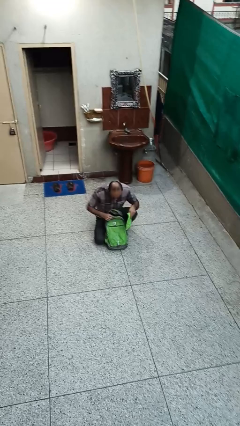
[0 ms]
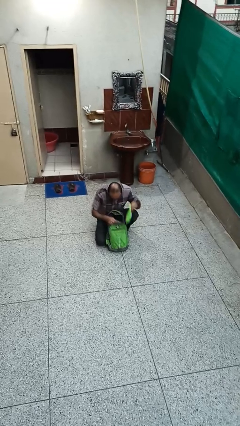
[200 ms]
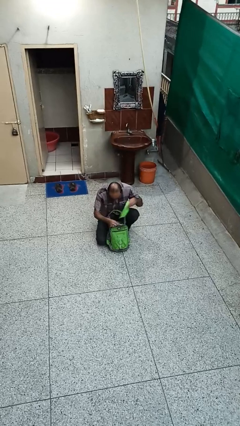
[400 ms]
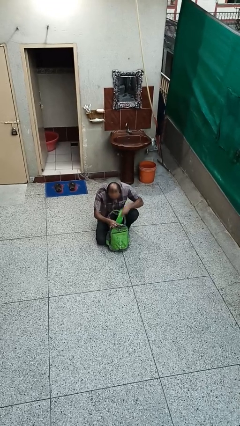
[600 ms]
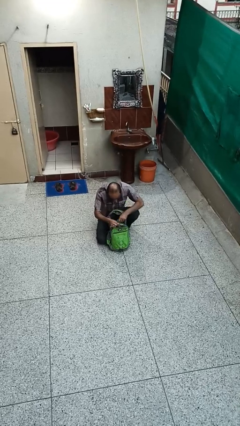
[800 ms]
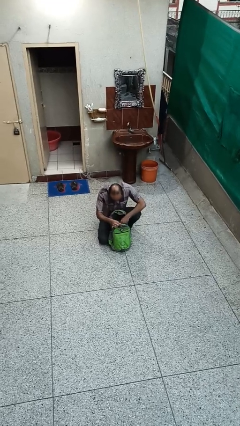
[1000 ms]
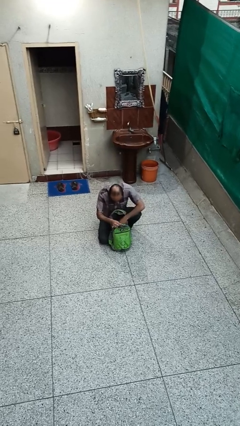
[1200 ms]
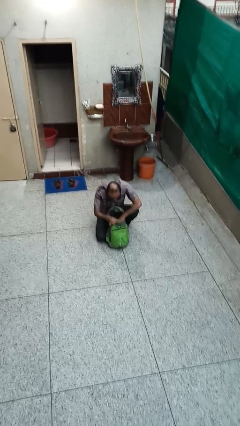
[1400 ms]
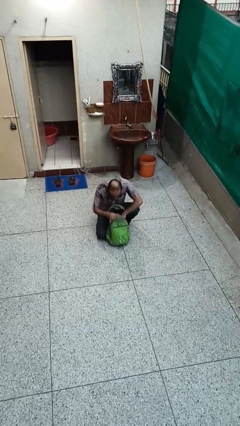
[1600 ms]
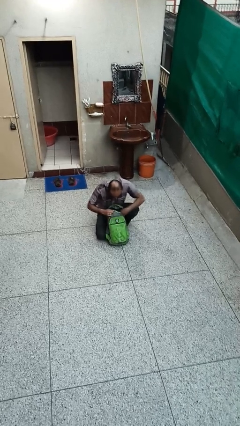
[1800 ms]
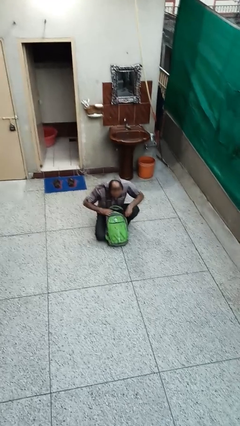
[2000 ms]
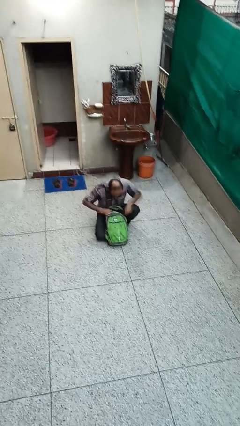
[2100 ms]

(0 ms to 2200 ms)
person puts object into backpack

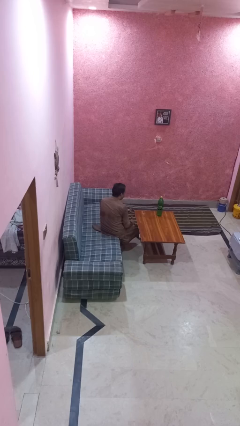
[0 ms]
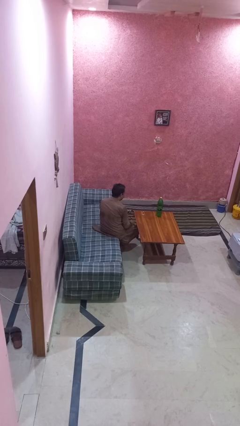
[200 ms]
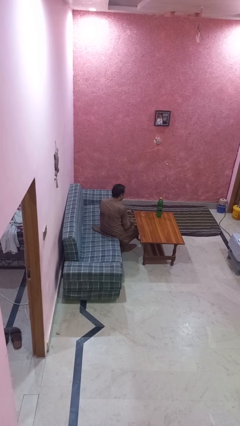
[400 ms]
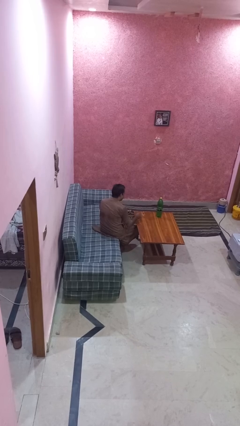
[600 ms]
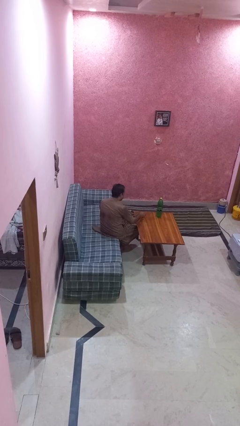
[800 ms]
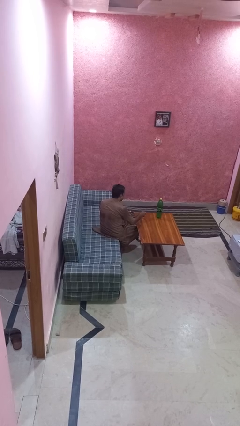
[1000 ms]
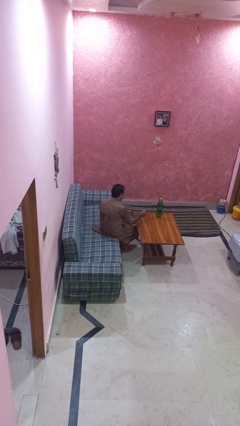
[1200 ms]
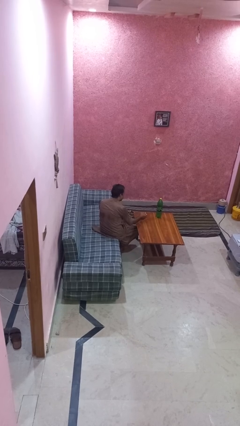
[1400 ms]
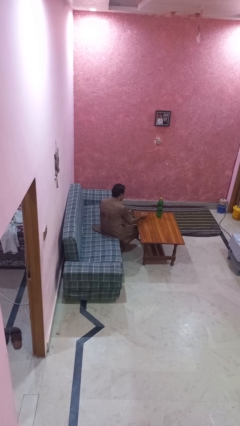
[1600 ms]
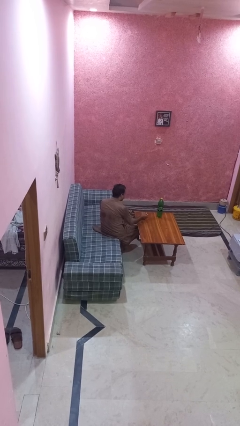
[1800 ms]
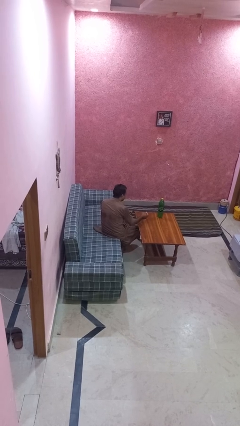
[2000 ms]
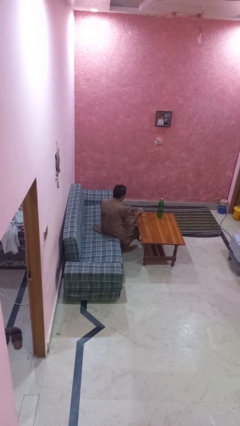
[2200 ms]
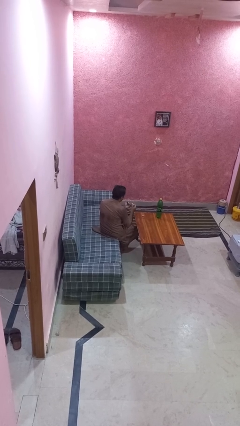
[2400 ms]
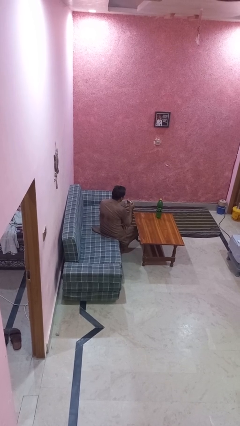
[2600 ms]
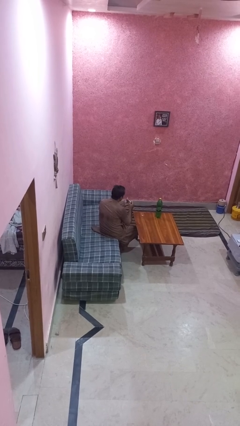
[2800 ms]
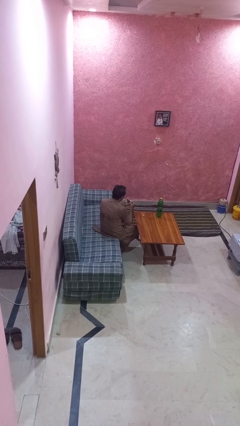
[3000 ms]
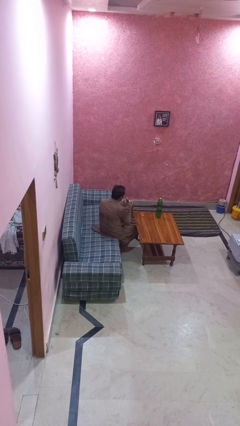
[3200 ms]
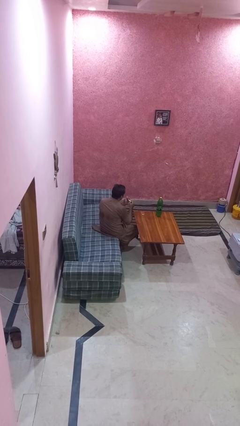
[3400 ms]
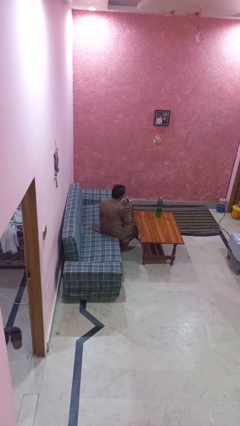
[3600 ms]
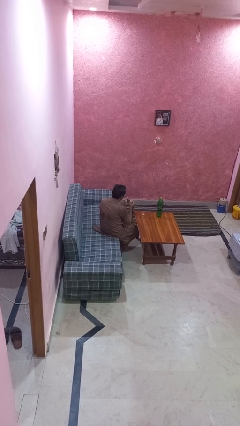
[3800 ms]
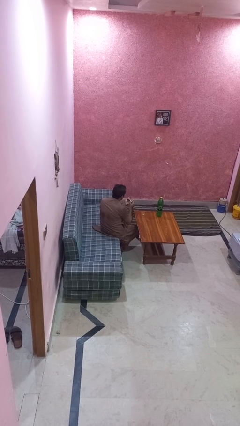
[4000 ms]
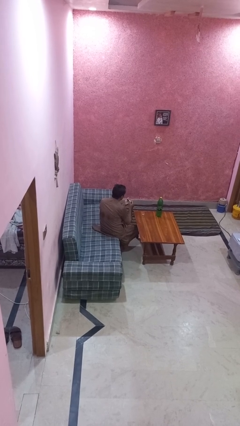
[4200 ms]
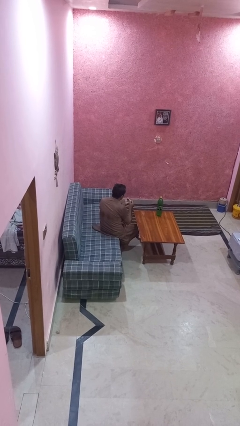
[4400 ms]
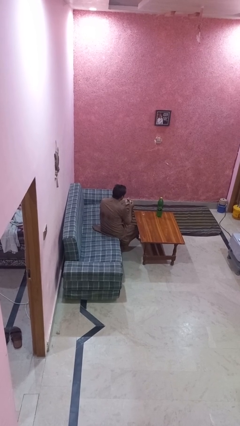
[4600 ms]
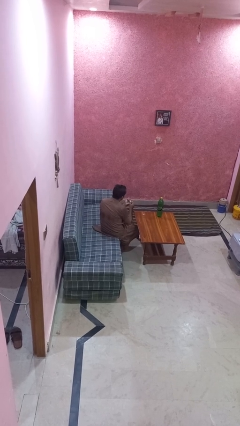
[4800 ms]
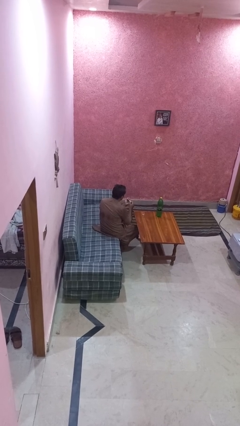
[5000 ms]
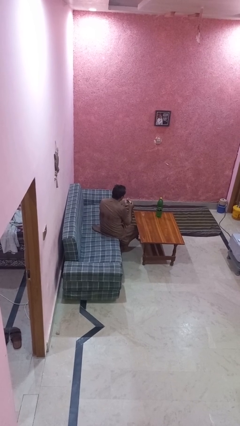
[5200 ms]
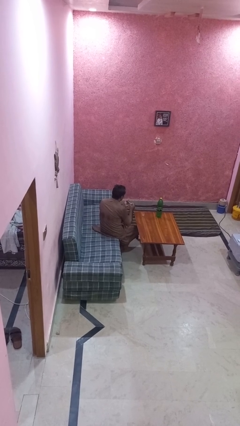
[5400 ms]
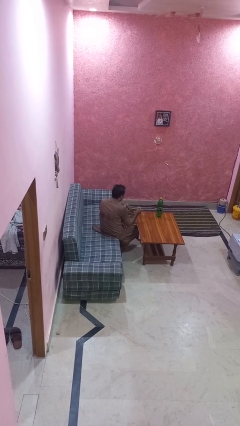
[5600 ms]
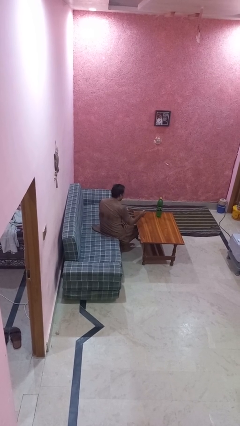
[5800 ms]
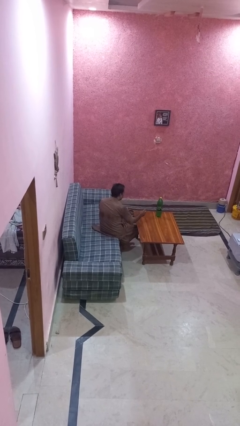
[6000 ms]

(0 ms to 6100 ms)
person paints fingernails

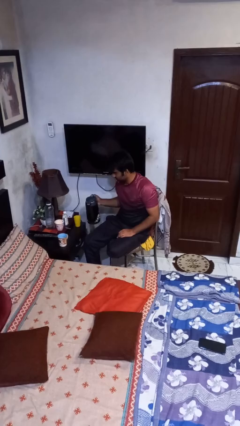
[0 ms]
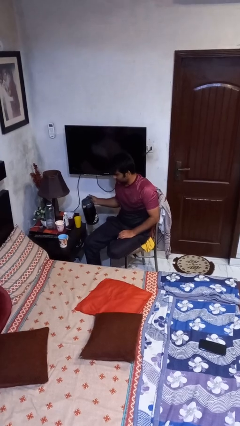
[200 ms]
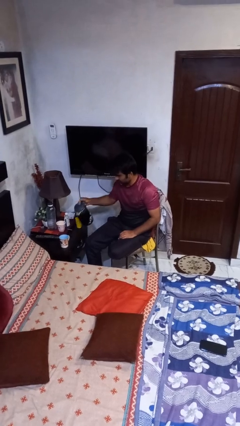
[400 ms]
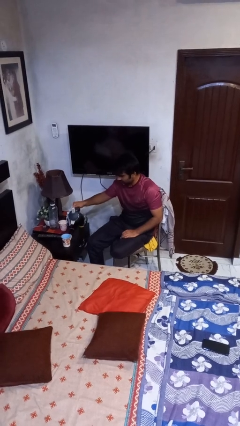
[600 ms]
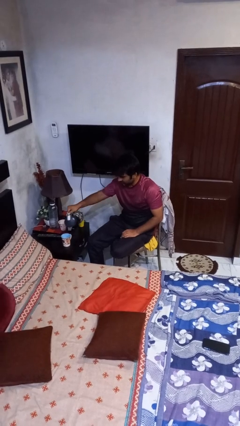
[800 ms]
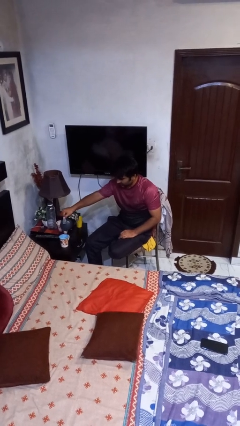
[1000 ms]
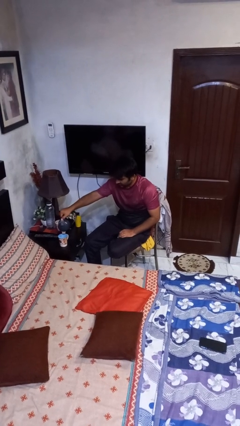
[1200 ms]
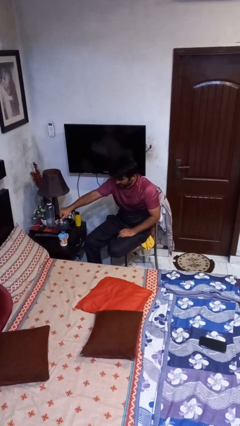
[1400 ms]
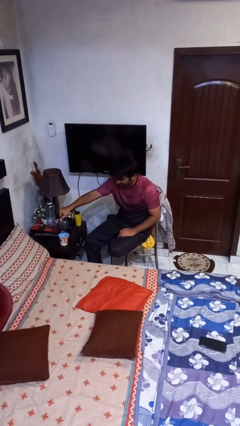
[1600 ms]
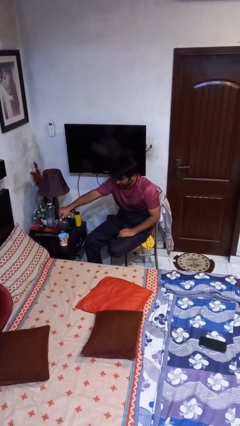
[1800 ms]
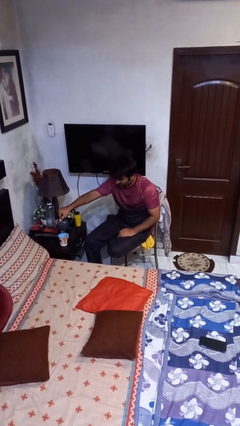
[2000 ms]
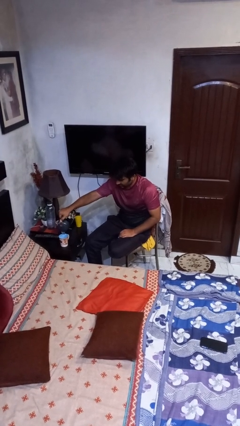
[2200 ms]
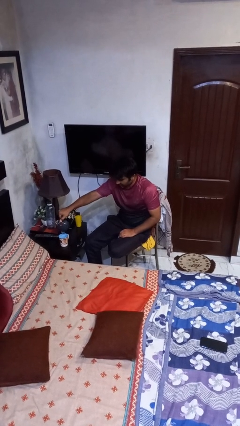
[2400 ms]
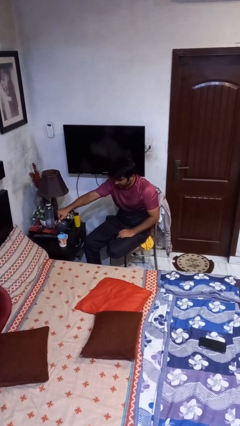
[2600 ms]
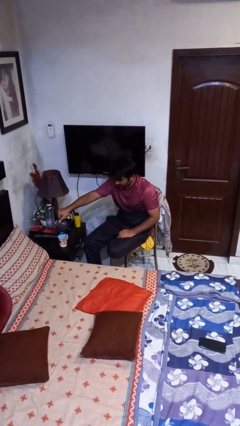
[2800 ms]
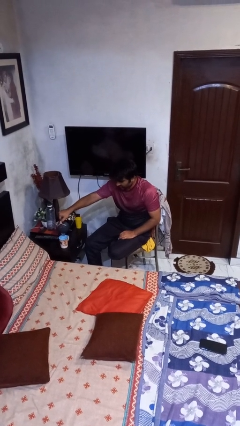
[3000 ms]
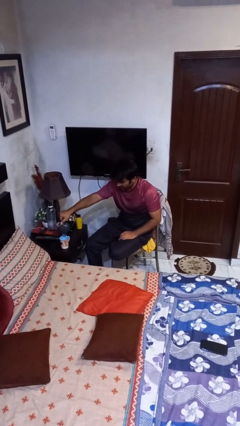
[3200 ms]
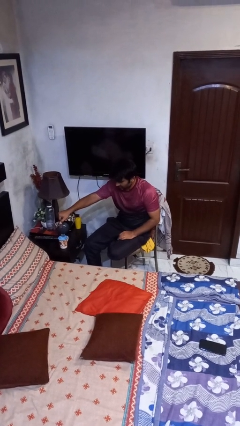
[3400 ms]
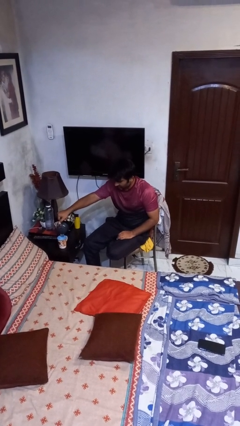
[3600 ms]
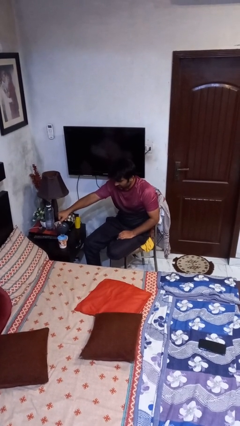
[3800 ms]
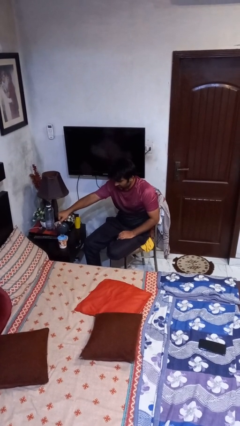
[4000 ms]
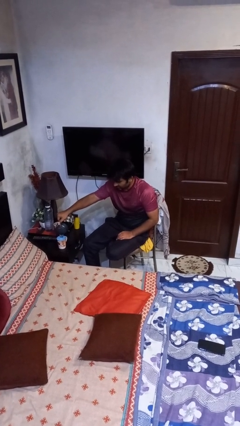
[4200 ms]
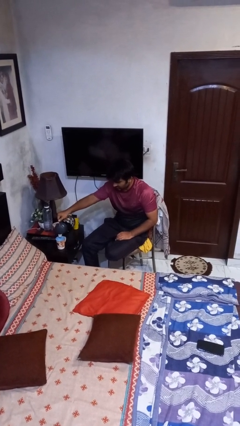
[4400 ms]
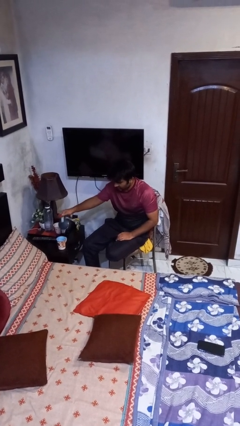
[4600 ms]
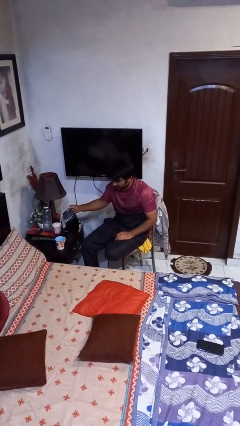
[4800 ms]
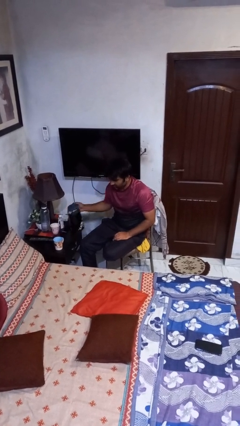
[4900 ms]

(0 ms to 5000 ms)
person pours coffee into mug

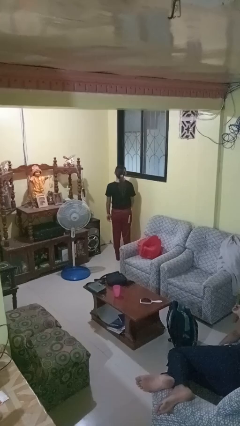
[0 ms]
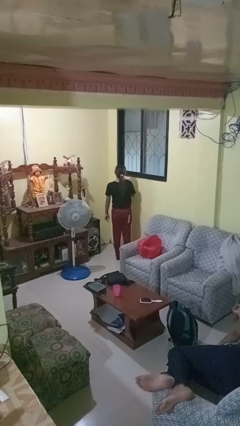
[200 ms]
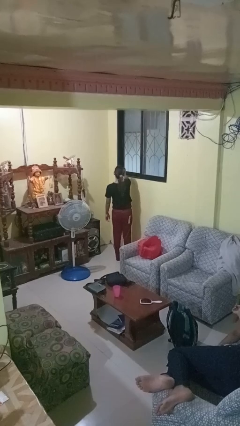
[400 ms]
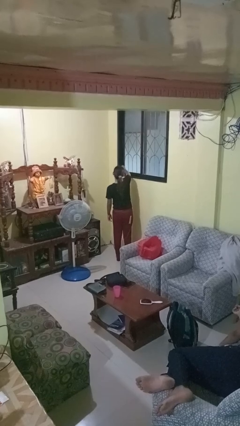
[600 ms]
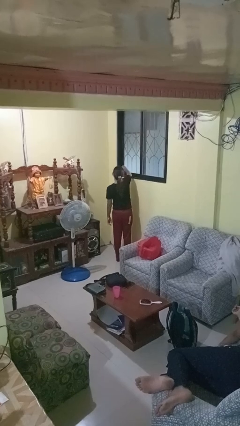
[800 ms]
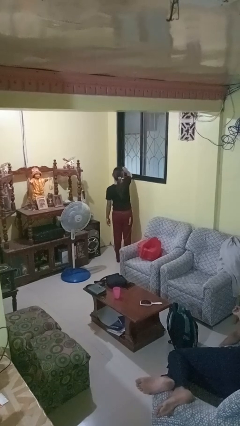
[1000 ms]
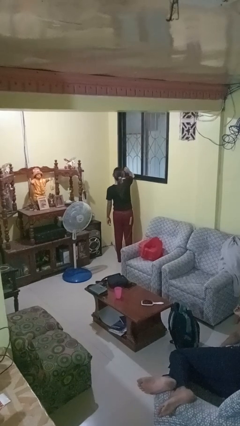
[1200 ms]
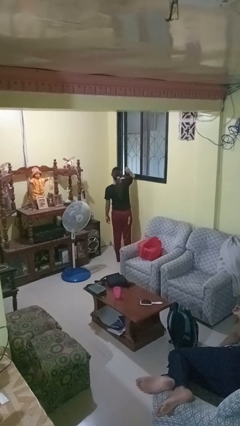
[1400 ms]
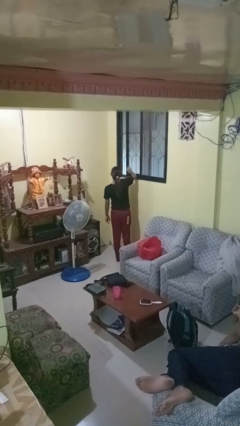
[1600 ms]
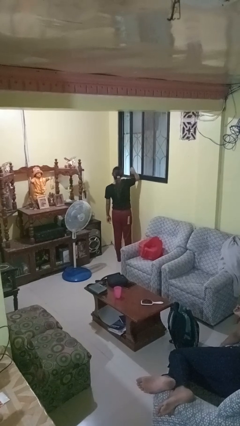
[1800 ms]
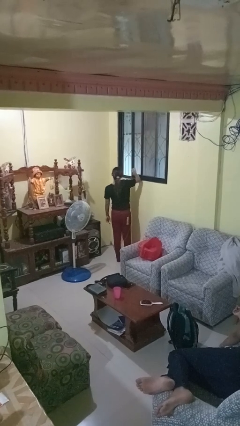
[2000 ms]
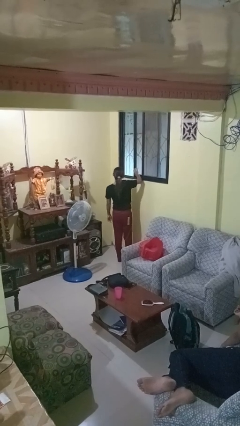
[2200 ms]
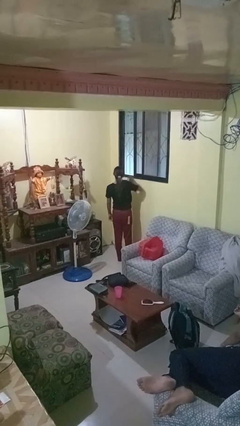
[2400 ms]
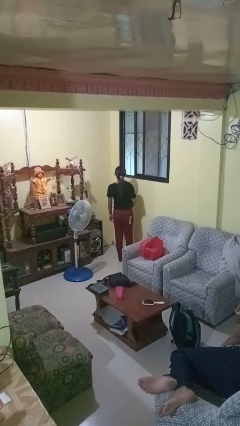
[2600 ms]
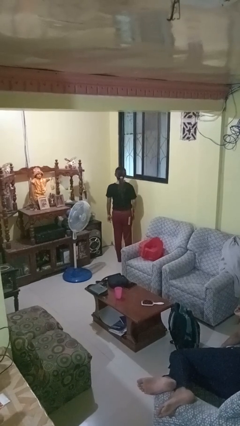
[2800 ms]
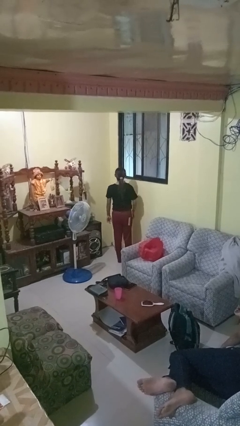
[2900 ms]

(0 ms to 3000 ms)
person opens home window

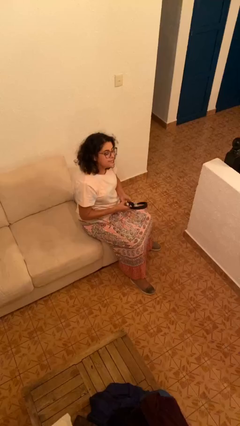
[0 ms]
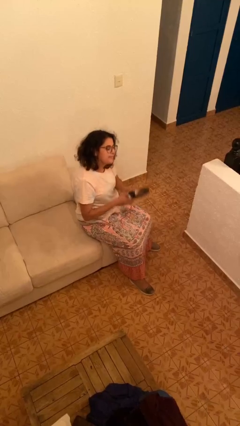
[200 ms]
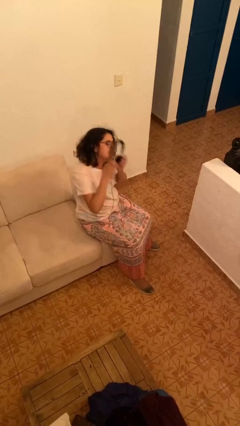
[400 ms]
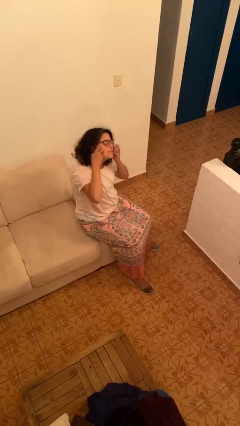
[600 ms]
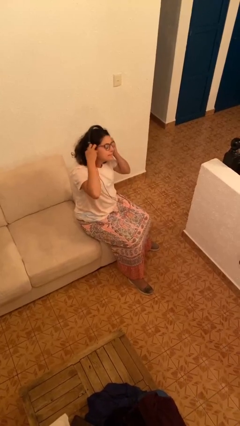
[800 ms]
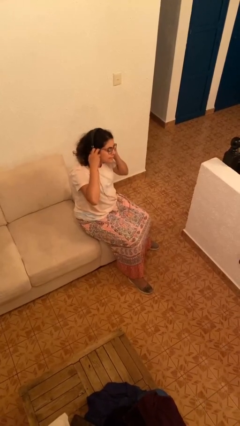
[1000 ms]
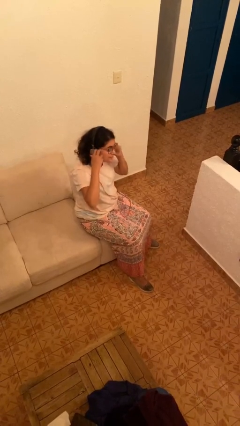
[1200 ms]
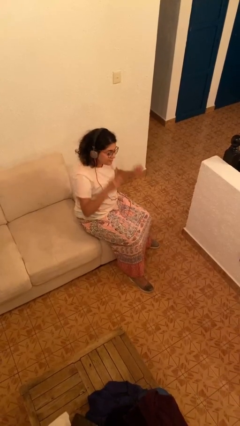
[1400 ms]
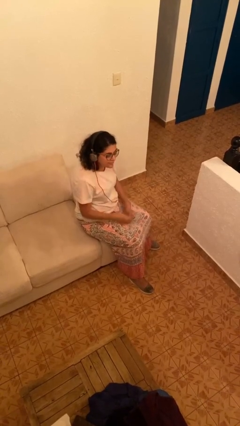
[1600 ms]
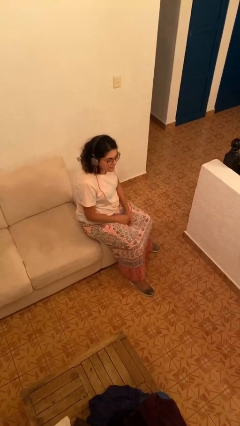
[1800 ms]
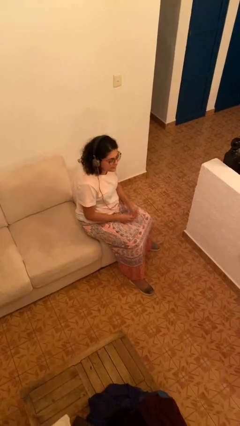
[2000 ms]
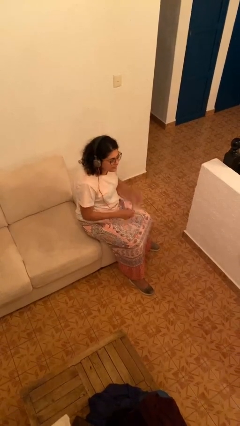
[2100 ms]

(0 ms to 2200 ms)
person puts on headphones
